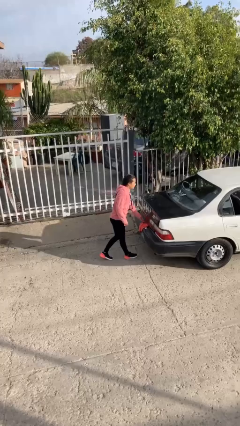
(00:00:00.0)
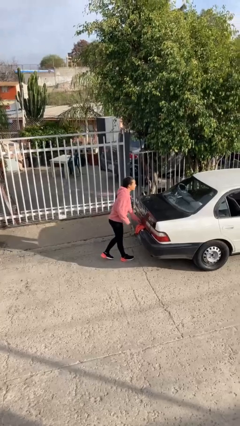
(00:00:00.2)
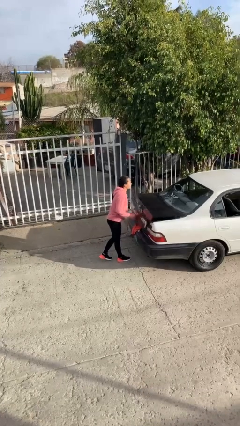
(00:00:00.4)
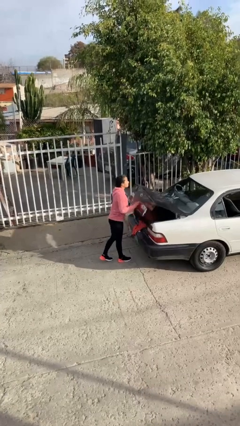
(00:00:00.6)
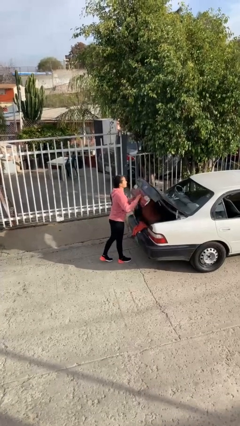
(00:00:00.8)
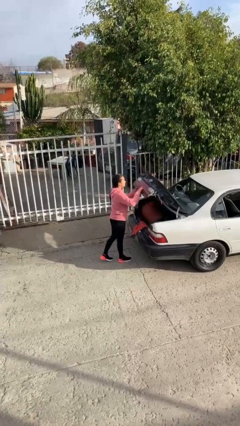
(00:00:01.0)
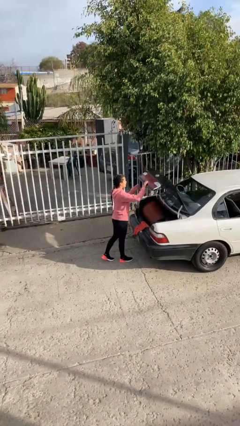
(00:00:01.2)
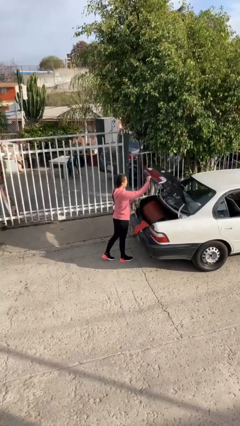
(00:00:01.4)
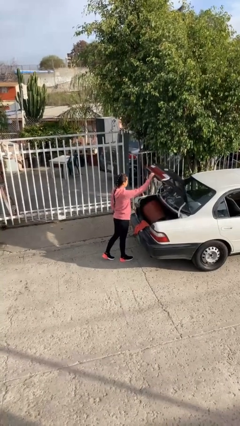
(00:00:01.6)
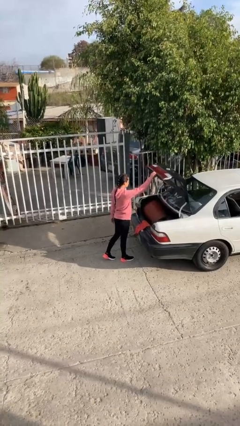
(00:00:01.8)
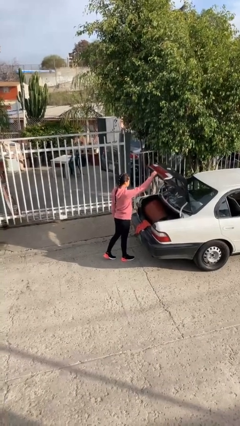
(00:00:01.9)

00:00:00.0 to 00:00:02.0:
person opens car trunk

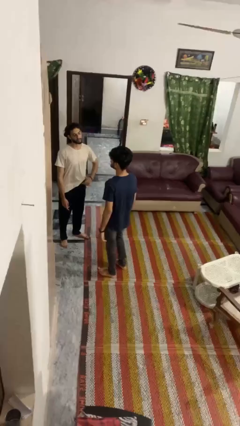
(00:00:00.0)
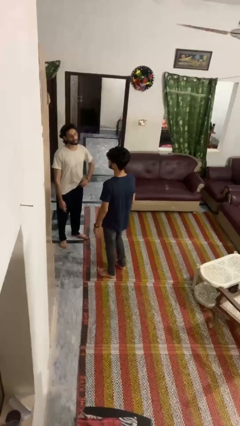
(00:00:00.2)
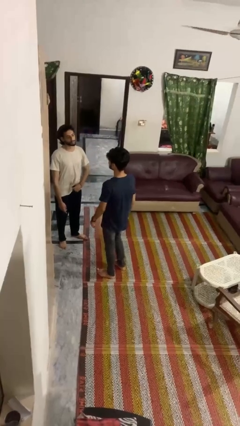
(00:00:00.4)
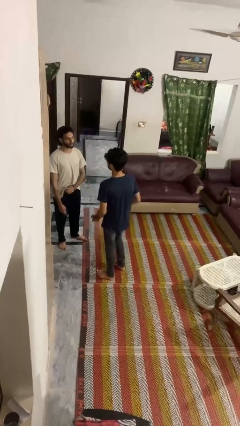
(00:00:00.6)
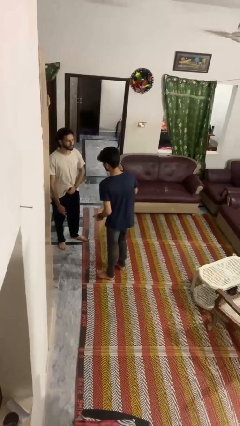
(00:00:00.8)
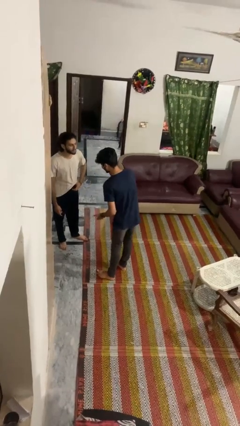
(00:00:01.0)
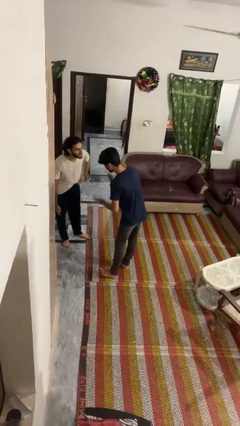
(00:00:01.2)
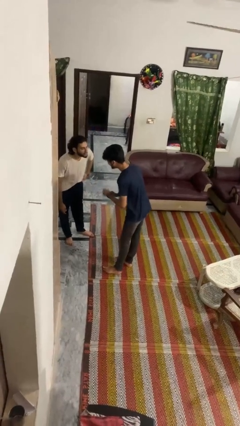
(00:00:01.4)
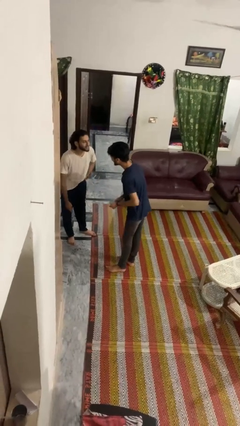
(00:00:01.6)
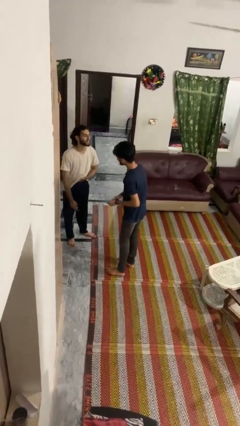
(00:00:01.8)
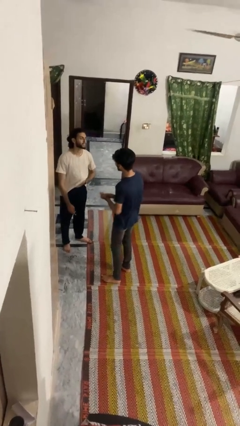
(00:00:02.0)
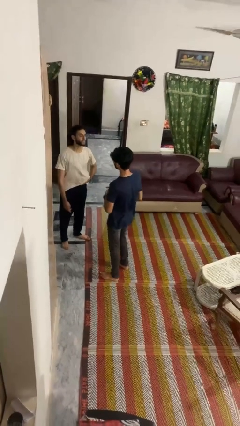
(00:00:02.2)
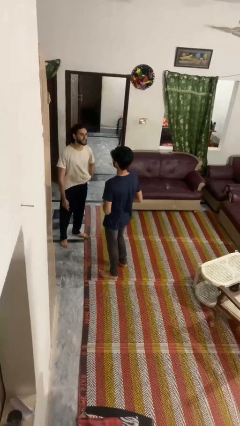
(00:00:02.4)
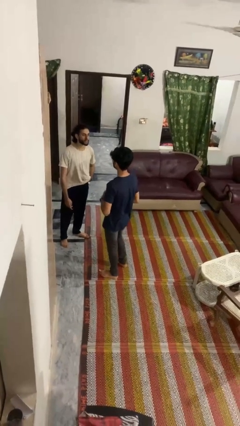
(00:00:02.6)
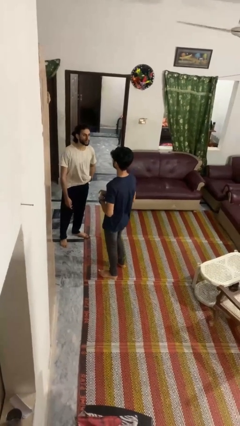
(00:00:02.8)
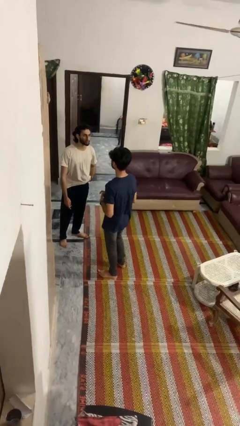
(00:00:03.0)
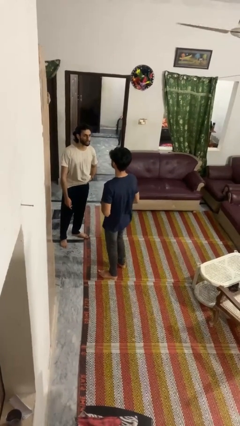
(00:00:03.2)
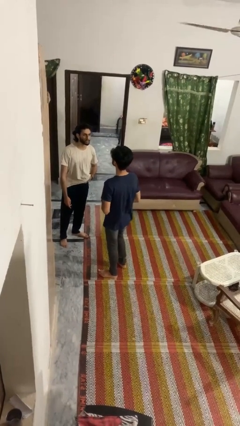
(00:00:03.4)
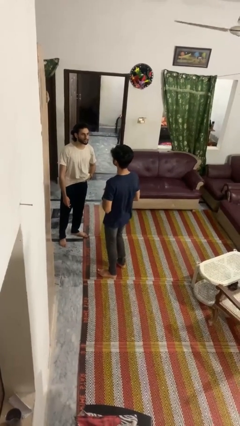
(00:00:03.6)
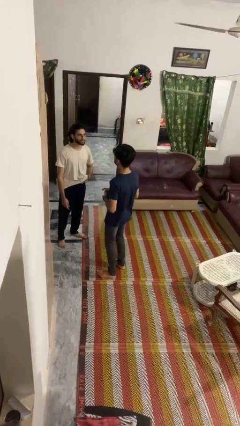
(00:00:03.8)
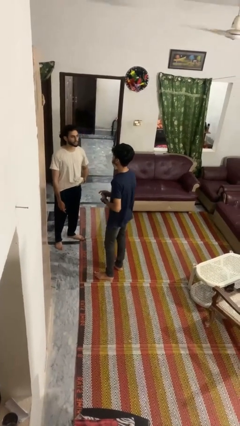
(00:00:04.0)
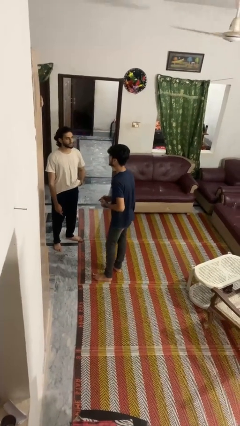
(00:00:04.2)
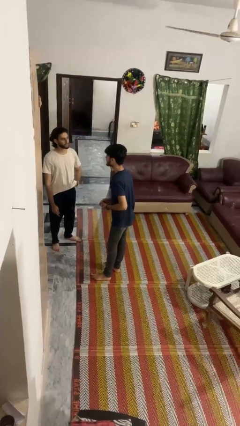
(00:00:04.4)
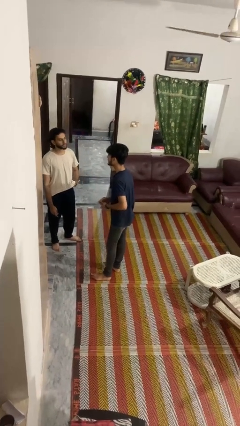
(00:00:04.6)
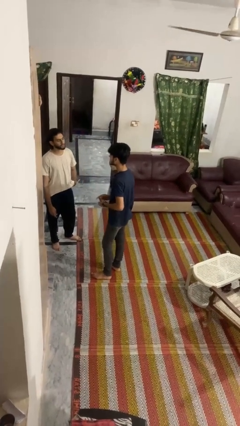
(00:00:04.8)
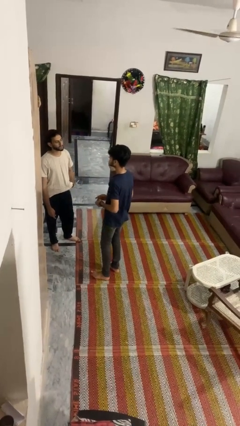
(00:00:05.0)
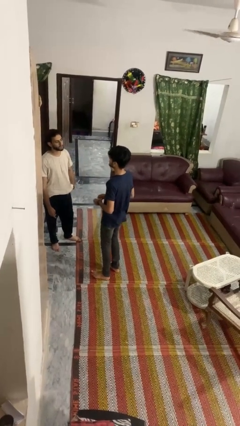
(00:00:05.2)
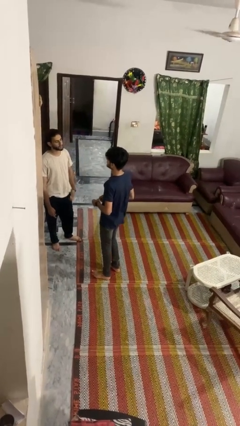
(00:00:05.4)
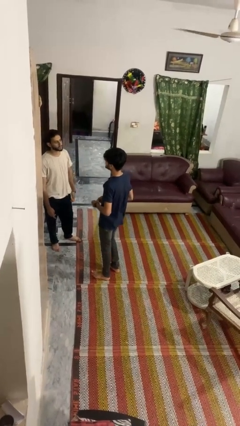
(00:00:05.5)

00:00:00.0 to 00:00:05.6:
person laughs with person

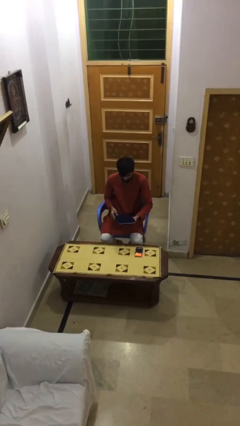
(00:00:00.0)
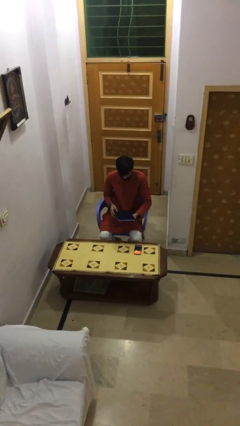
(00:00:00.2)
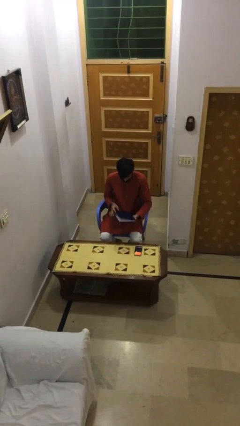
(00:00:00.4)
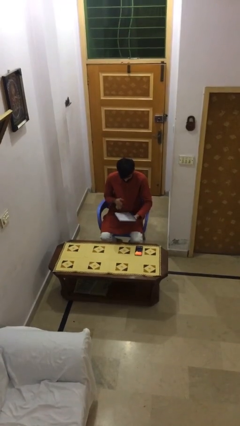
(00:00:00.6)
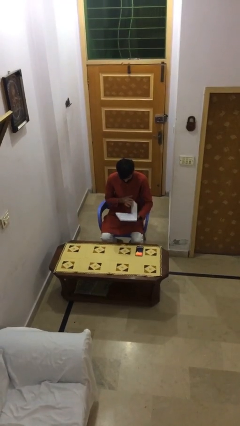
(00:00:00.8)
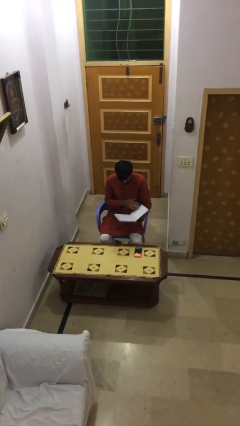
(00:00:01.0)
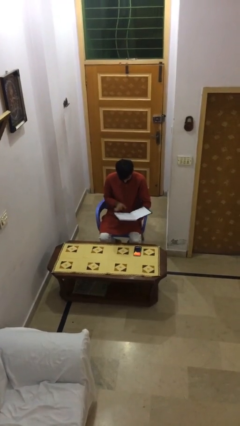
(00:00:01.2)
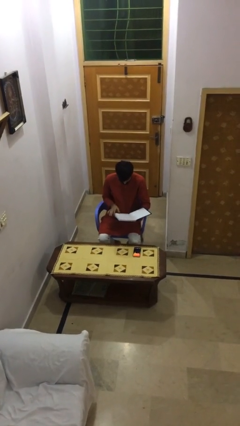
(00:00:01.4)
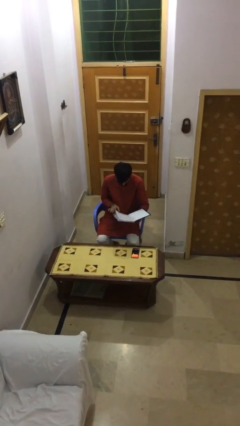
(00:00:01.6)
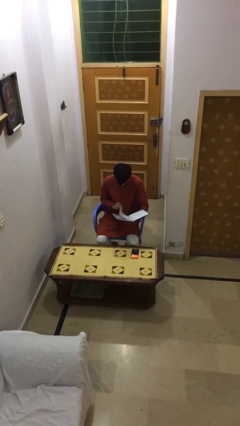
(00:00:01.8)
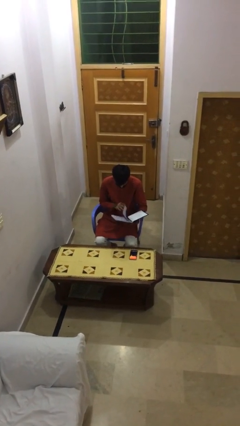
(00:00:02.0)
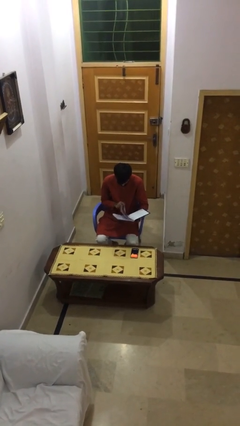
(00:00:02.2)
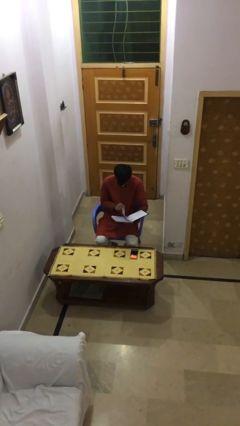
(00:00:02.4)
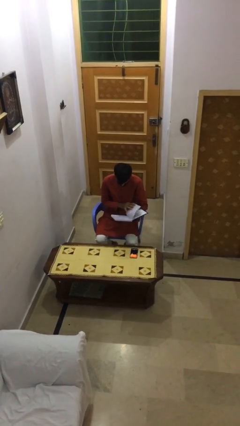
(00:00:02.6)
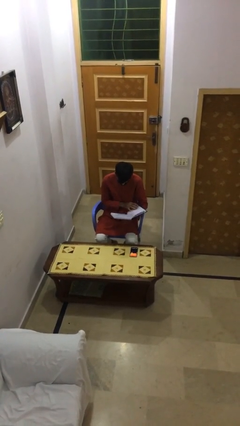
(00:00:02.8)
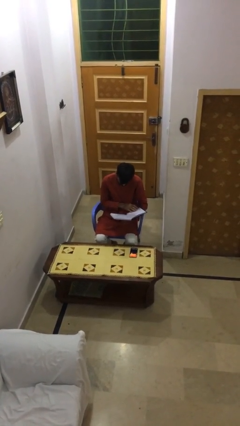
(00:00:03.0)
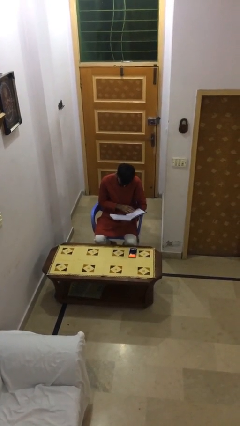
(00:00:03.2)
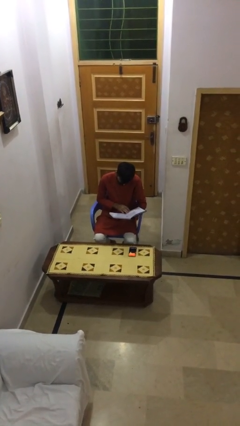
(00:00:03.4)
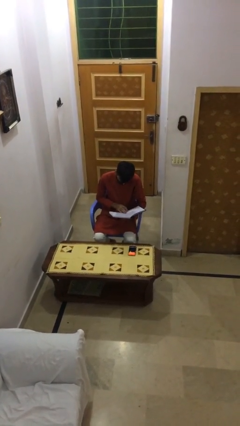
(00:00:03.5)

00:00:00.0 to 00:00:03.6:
person reads document

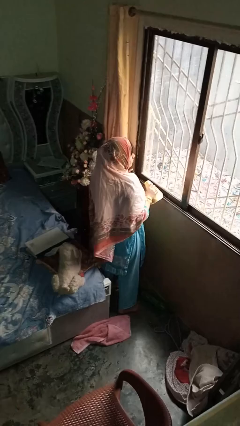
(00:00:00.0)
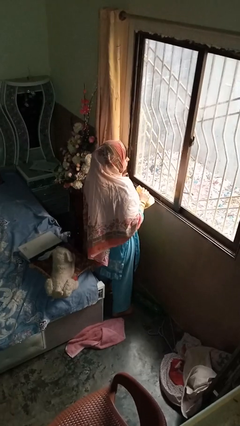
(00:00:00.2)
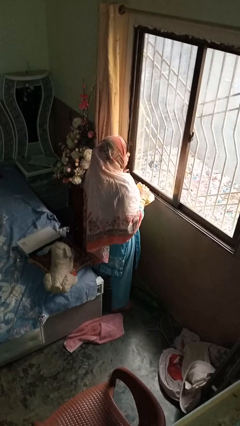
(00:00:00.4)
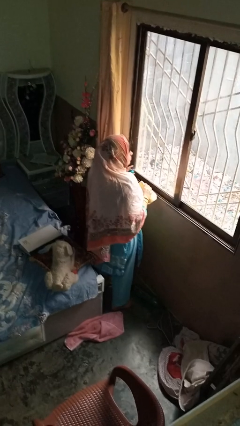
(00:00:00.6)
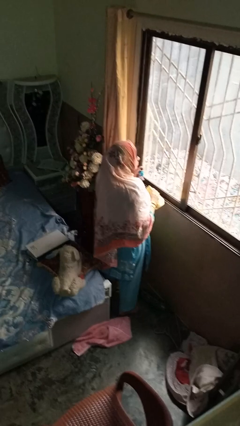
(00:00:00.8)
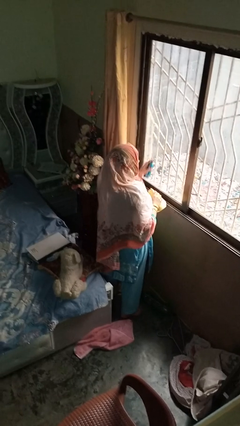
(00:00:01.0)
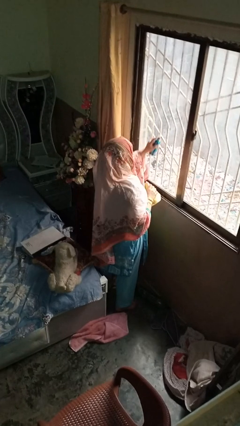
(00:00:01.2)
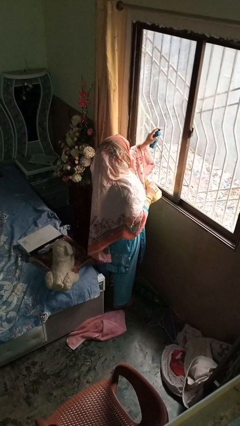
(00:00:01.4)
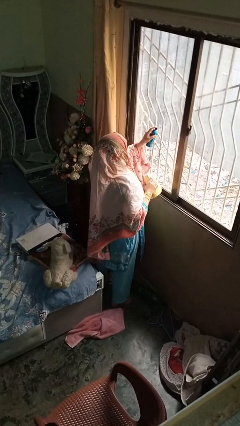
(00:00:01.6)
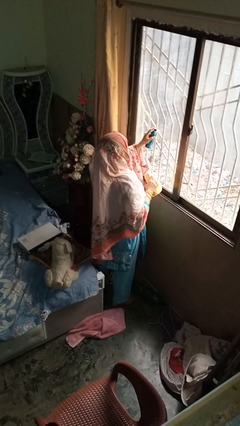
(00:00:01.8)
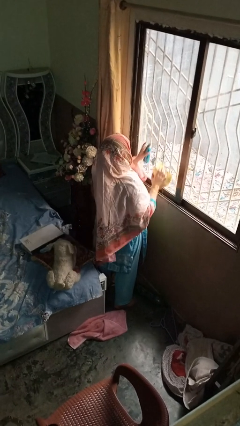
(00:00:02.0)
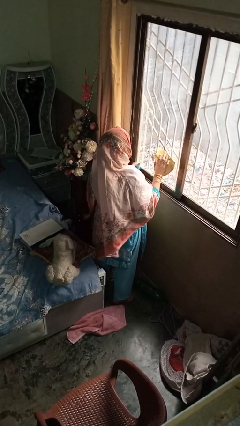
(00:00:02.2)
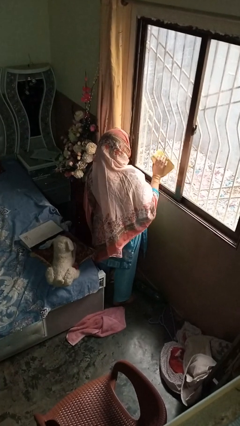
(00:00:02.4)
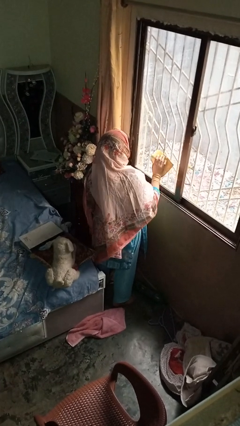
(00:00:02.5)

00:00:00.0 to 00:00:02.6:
person sprays from bottle

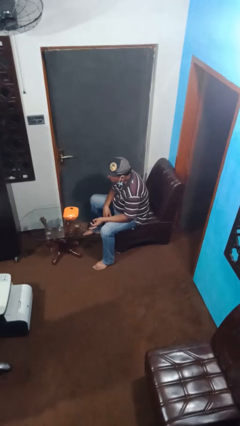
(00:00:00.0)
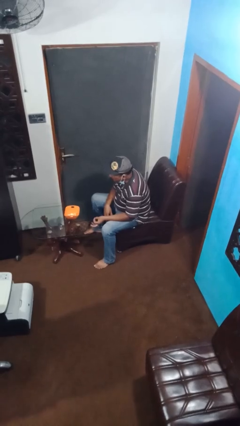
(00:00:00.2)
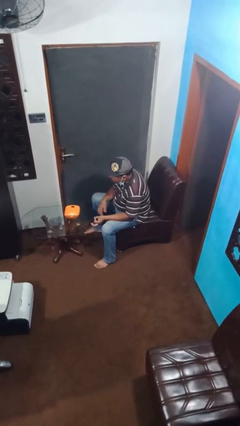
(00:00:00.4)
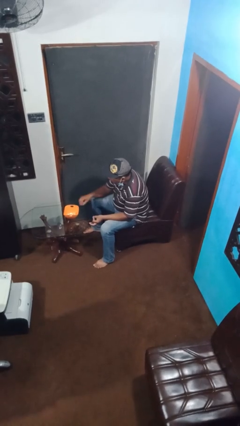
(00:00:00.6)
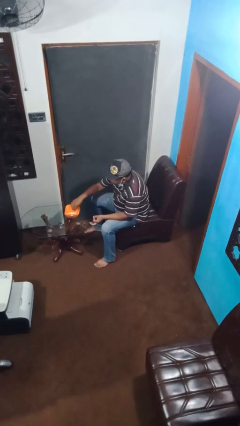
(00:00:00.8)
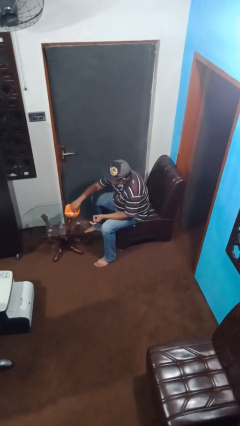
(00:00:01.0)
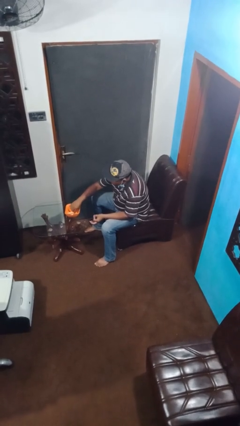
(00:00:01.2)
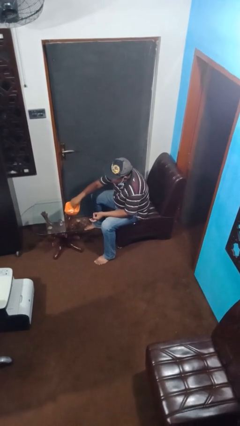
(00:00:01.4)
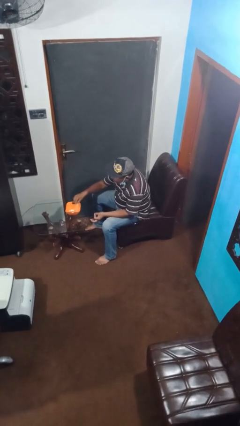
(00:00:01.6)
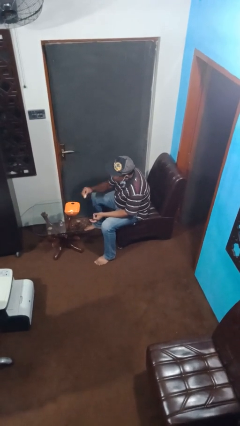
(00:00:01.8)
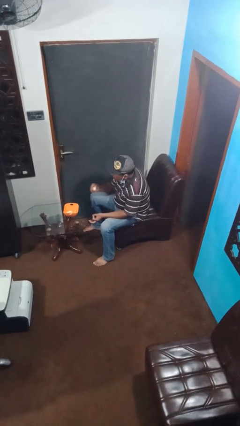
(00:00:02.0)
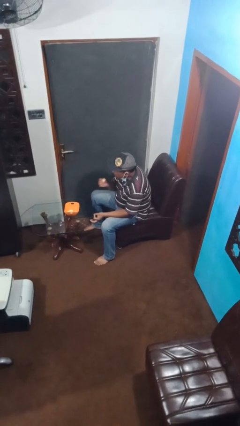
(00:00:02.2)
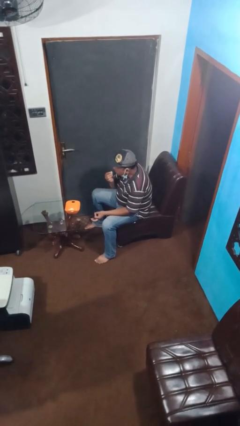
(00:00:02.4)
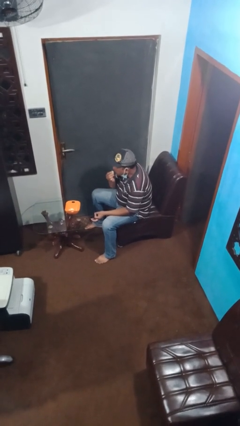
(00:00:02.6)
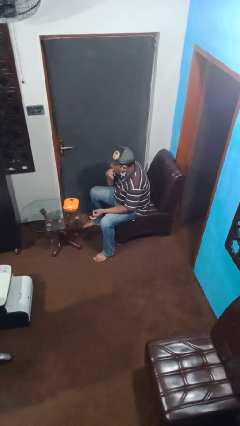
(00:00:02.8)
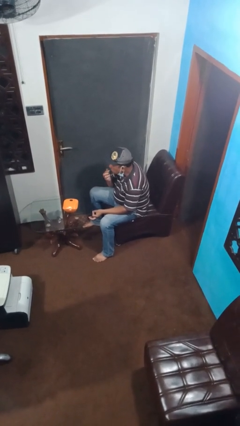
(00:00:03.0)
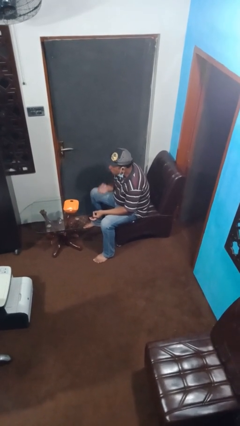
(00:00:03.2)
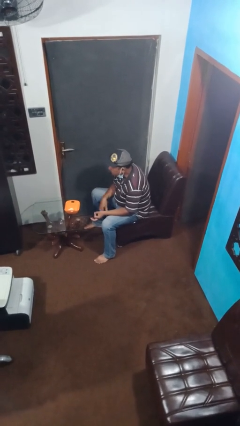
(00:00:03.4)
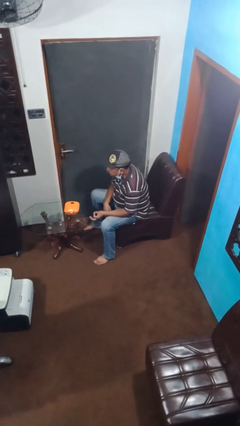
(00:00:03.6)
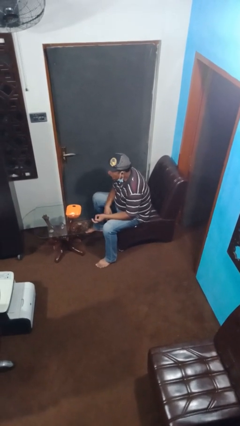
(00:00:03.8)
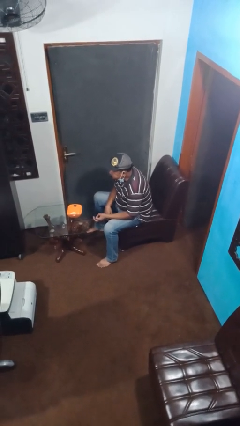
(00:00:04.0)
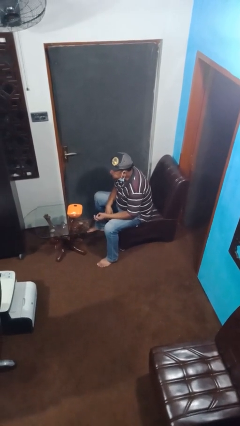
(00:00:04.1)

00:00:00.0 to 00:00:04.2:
person eats with hands
